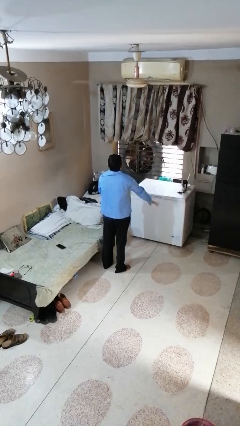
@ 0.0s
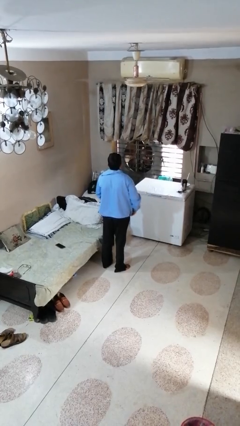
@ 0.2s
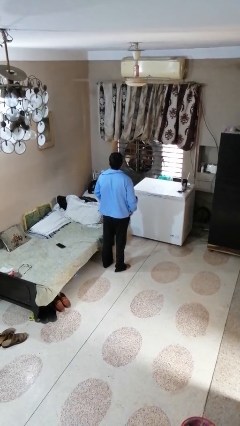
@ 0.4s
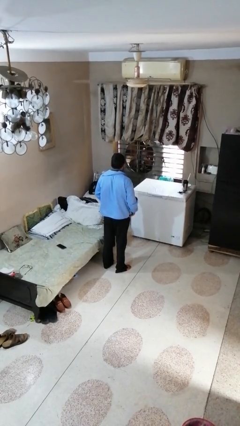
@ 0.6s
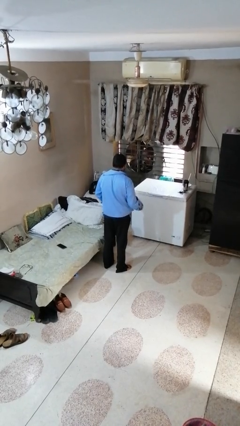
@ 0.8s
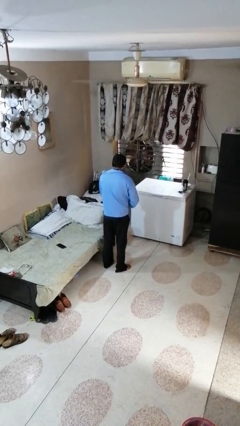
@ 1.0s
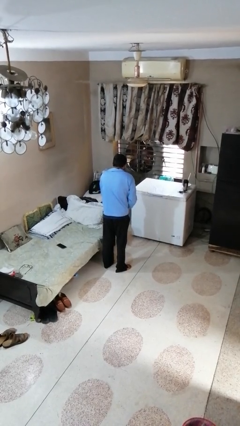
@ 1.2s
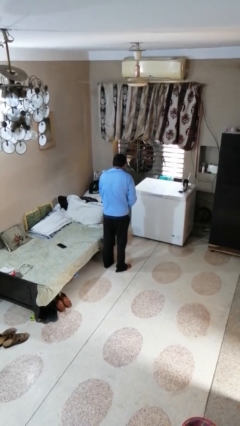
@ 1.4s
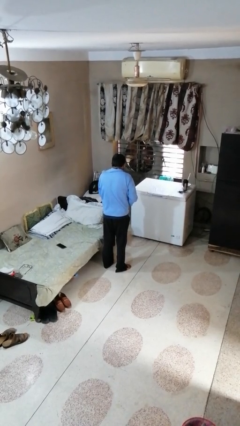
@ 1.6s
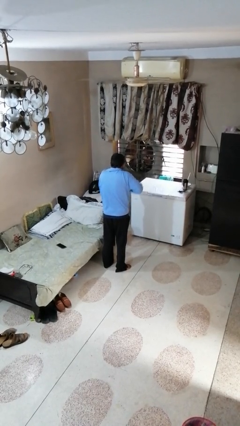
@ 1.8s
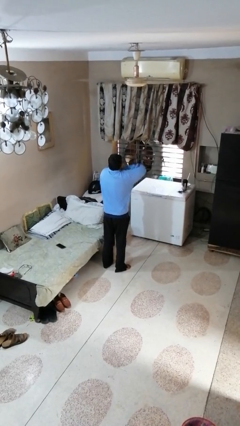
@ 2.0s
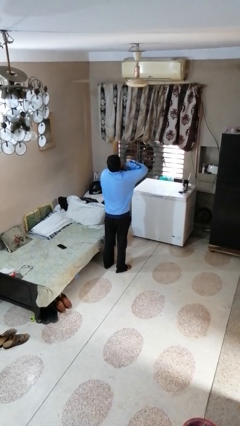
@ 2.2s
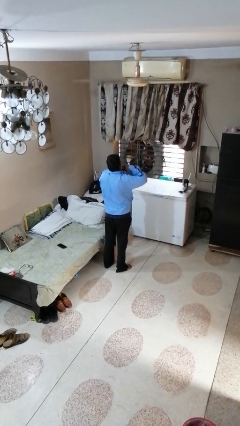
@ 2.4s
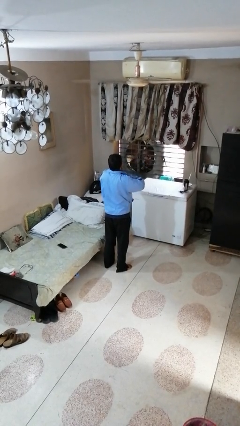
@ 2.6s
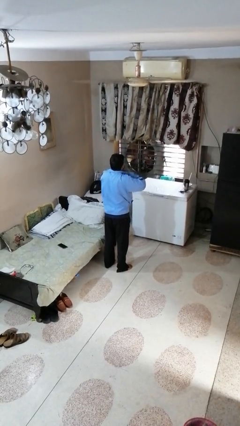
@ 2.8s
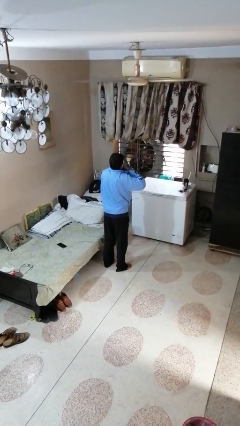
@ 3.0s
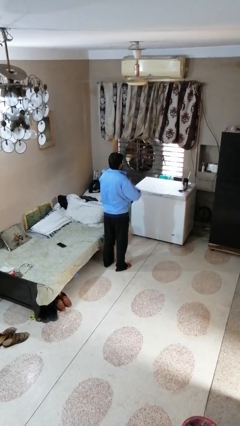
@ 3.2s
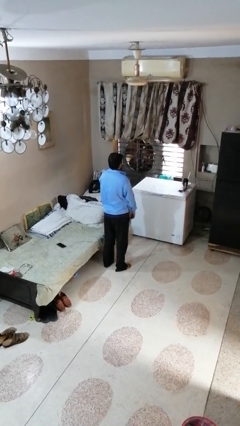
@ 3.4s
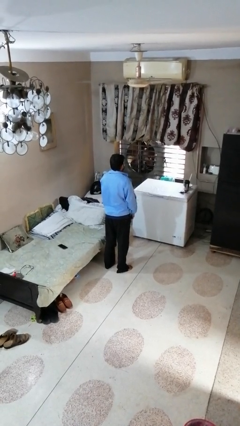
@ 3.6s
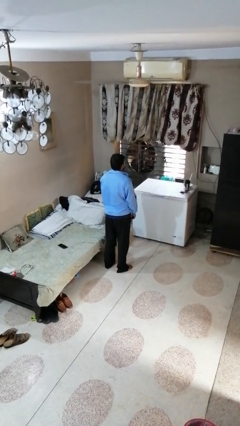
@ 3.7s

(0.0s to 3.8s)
person zips up jacket

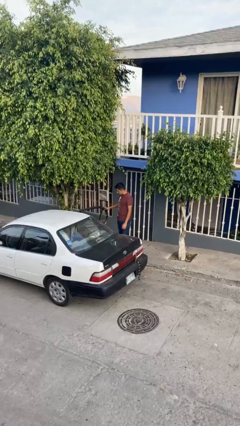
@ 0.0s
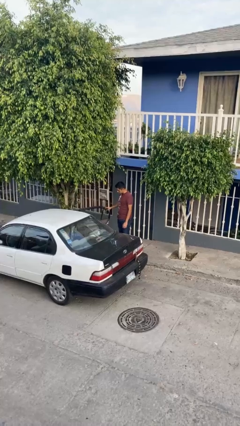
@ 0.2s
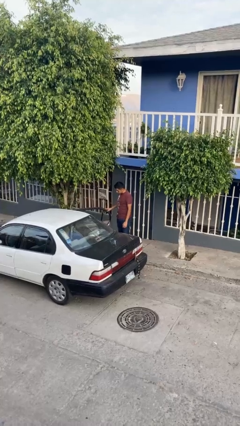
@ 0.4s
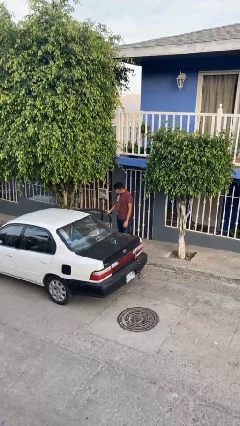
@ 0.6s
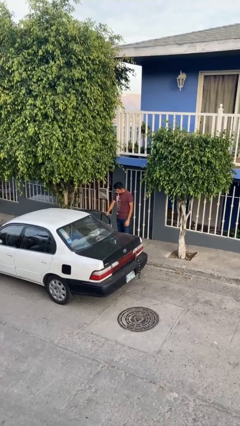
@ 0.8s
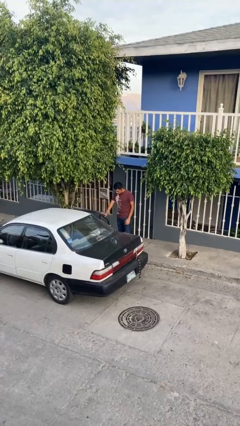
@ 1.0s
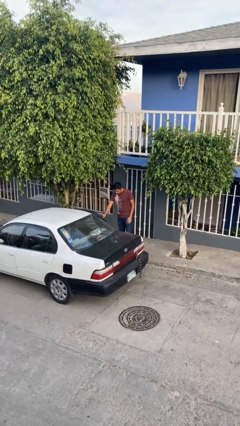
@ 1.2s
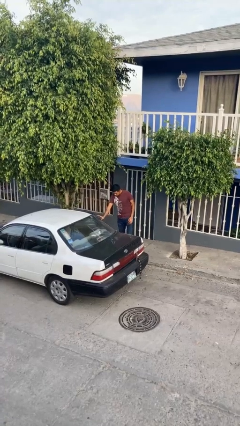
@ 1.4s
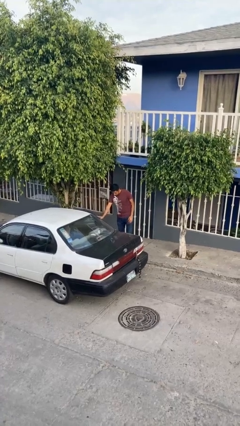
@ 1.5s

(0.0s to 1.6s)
person closes car door

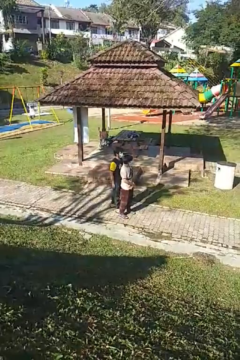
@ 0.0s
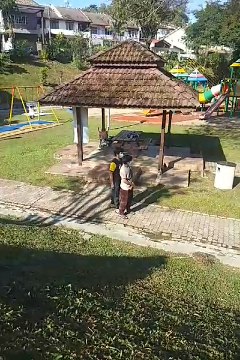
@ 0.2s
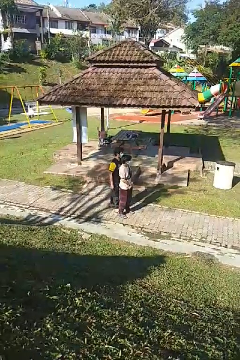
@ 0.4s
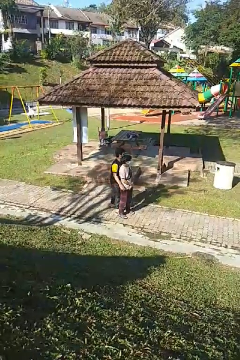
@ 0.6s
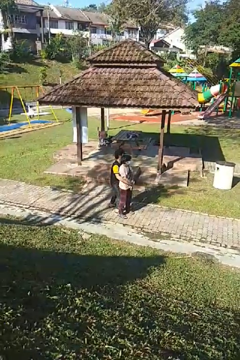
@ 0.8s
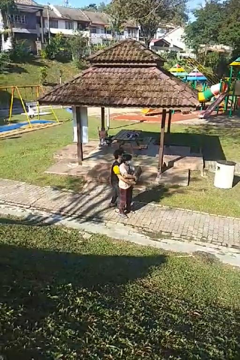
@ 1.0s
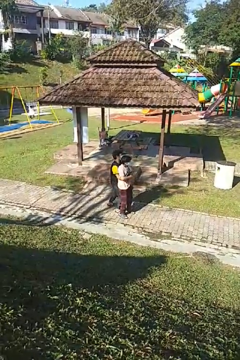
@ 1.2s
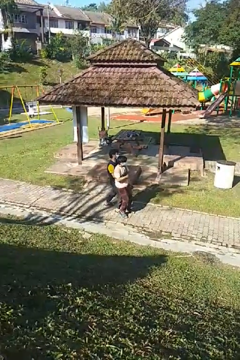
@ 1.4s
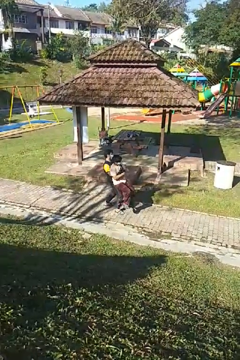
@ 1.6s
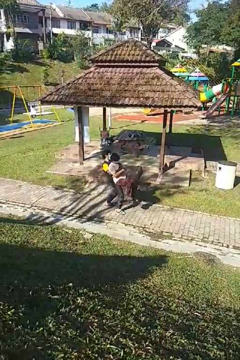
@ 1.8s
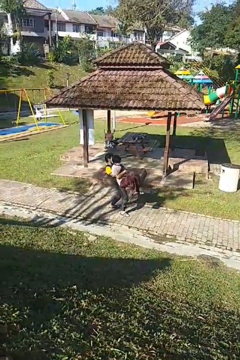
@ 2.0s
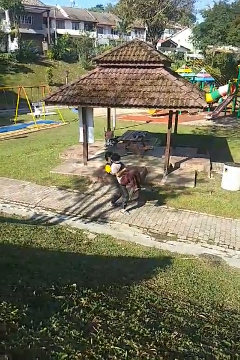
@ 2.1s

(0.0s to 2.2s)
person picks up person

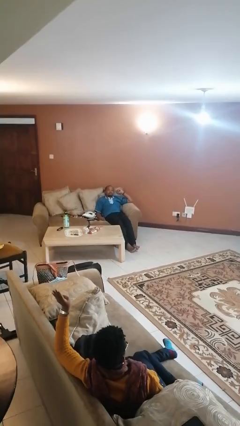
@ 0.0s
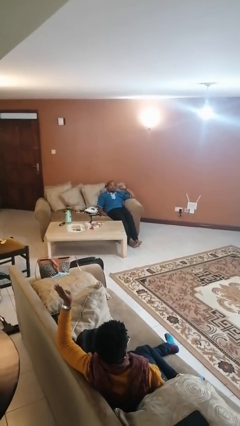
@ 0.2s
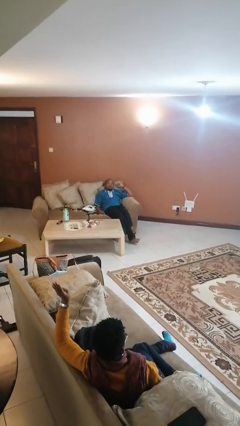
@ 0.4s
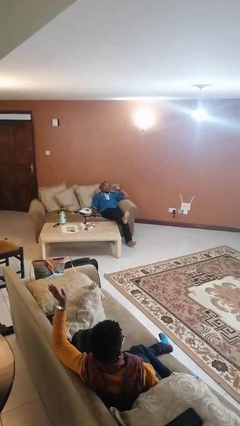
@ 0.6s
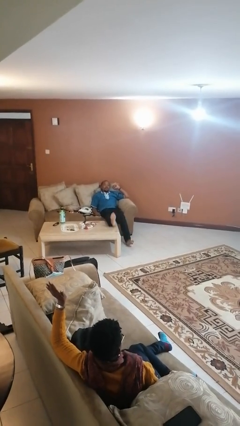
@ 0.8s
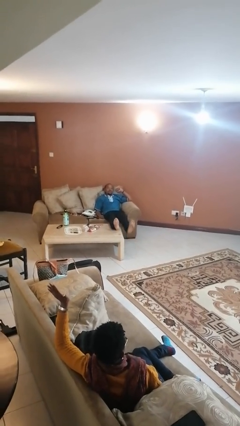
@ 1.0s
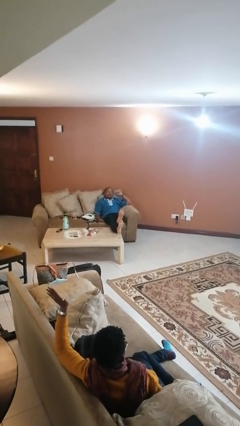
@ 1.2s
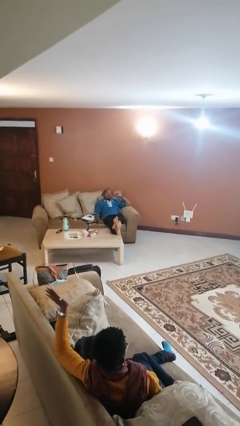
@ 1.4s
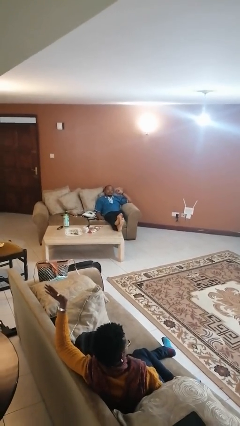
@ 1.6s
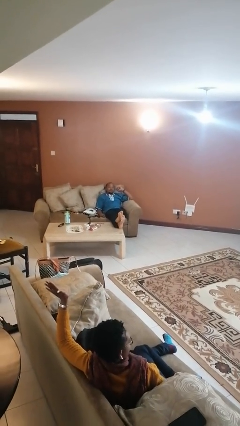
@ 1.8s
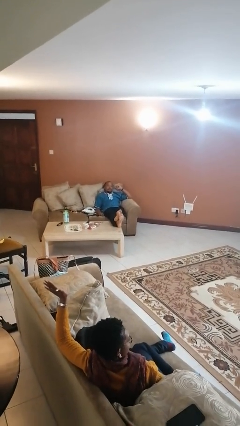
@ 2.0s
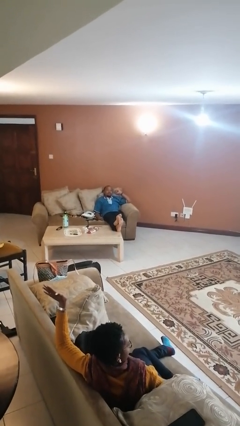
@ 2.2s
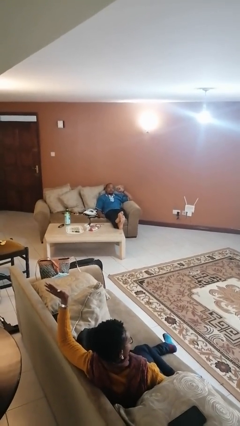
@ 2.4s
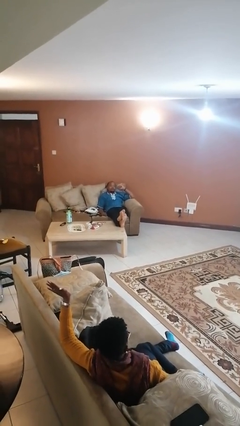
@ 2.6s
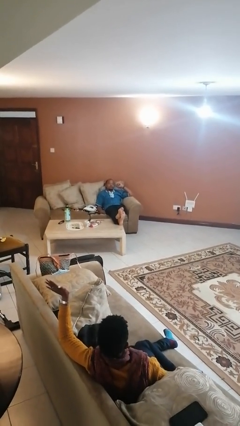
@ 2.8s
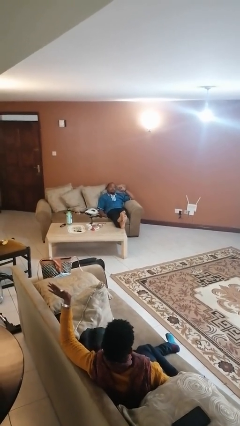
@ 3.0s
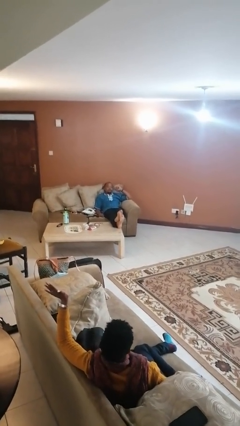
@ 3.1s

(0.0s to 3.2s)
person puts feet up

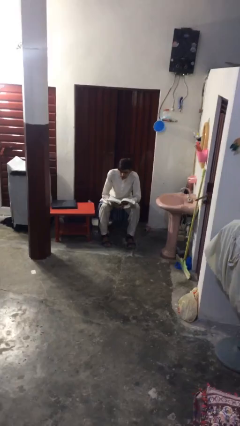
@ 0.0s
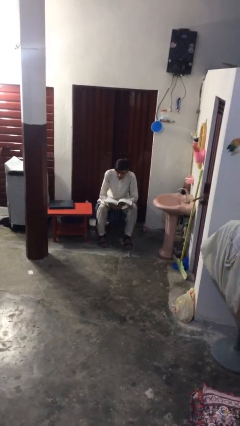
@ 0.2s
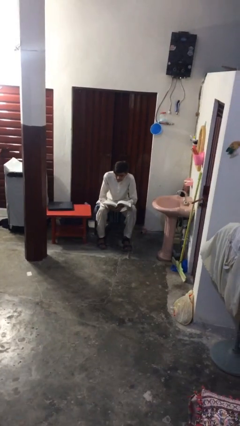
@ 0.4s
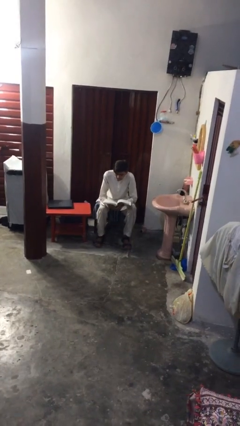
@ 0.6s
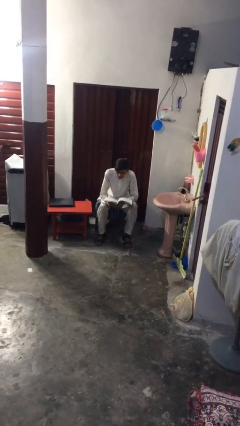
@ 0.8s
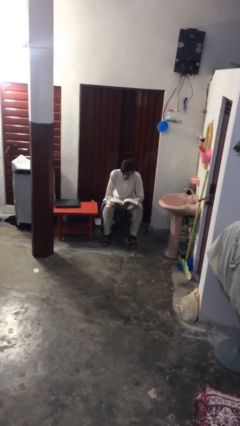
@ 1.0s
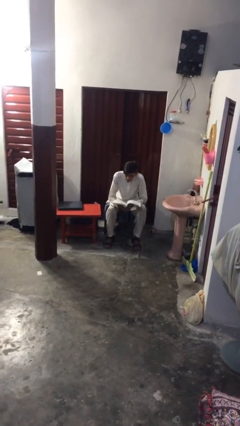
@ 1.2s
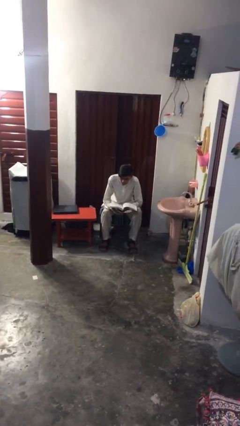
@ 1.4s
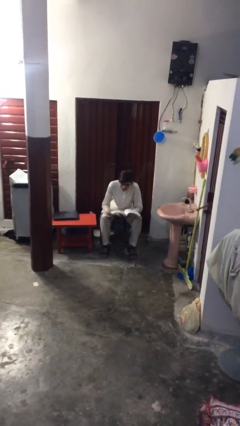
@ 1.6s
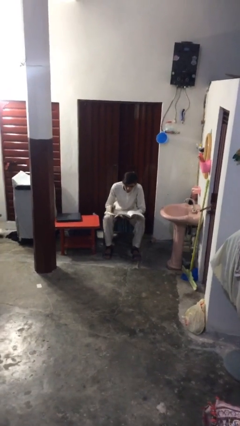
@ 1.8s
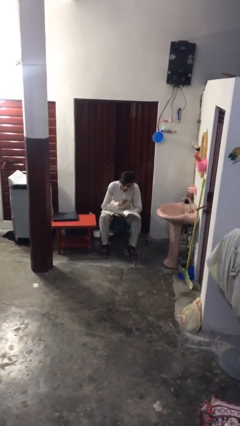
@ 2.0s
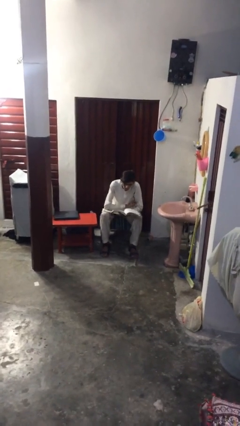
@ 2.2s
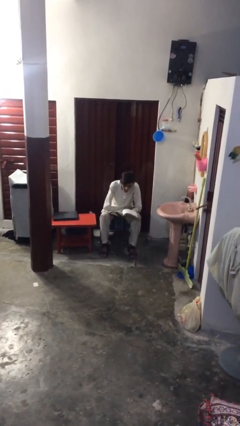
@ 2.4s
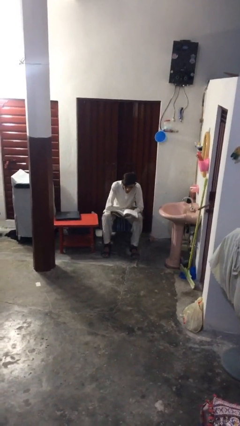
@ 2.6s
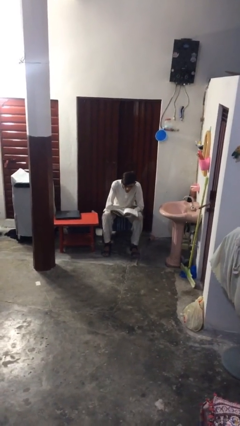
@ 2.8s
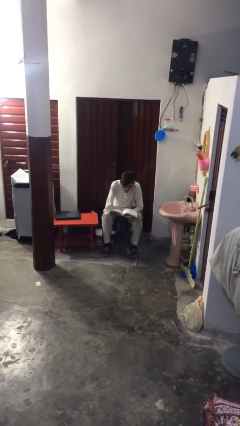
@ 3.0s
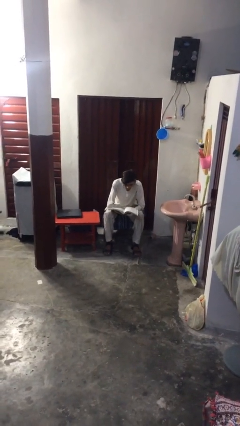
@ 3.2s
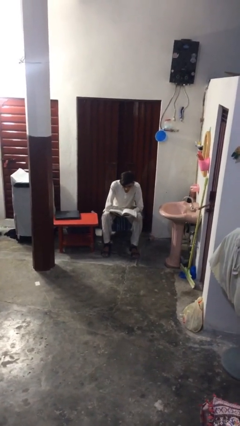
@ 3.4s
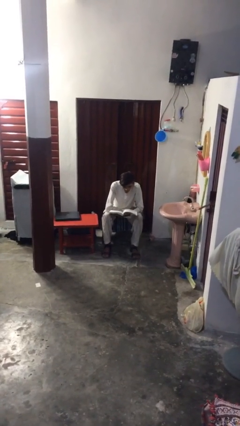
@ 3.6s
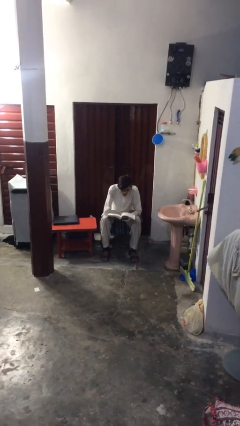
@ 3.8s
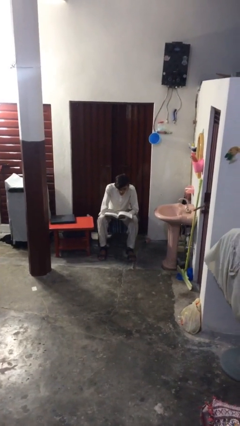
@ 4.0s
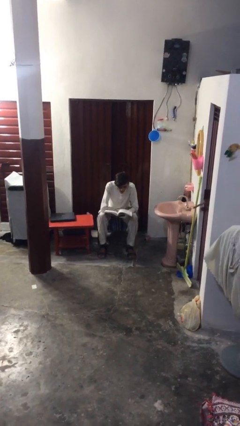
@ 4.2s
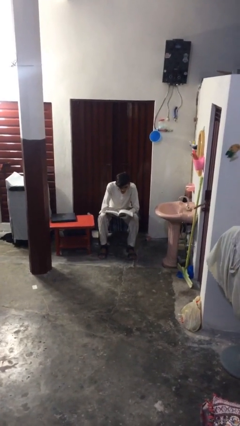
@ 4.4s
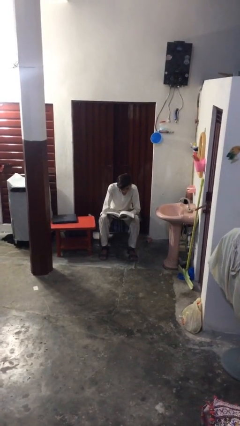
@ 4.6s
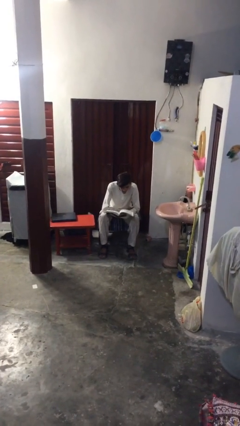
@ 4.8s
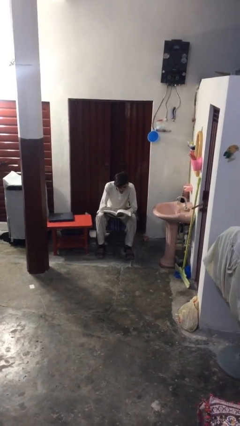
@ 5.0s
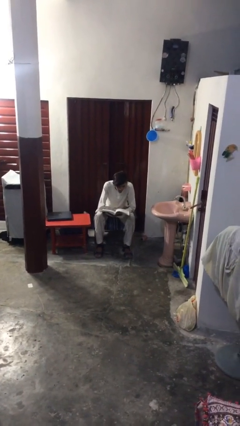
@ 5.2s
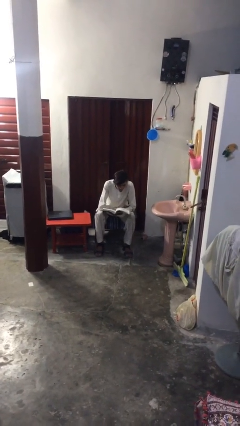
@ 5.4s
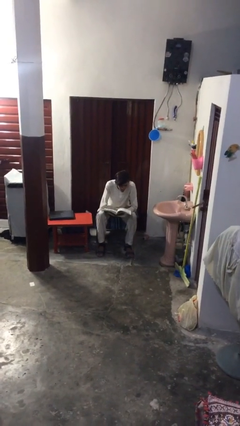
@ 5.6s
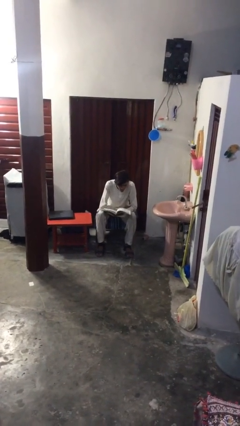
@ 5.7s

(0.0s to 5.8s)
person reads document

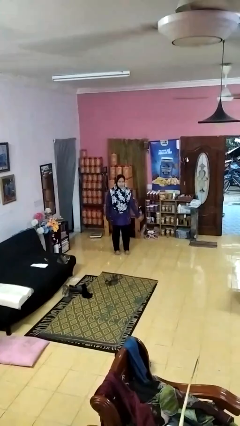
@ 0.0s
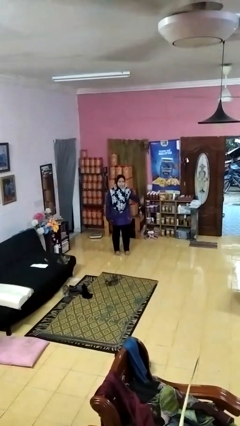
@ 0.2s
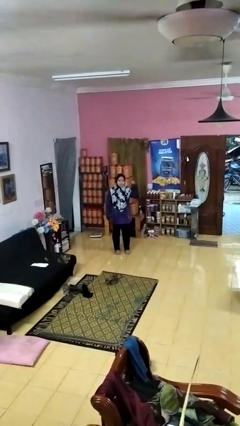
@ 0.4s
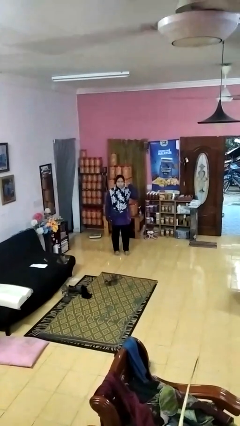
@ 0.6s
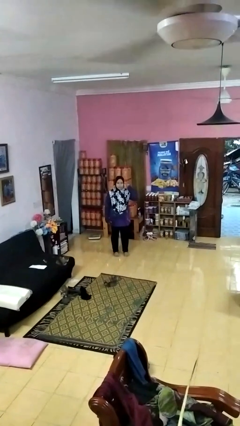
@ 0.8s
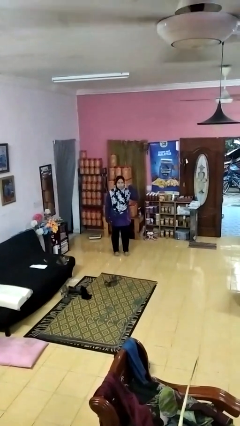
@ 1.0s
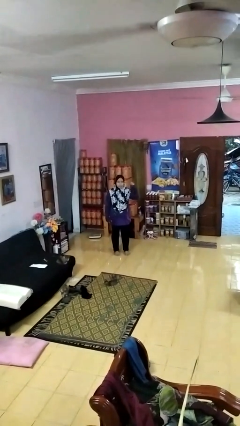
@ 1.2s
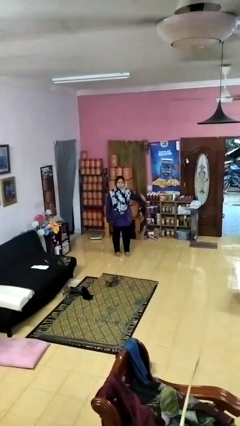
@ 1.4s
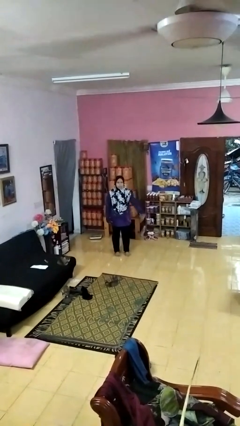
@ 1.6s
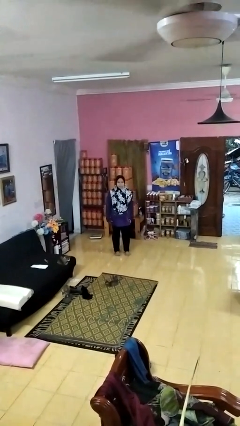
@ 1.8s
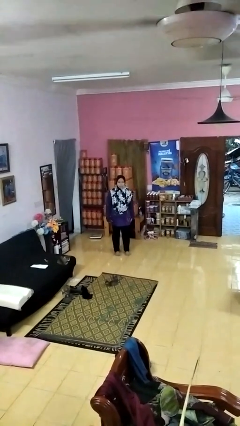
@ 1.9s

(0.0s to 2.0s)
person gestures behind me
